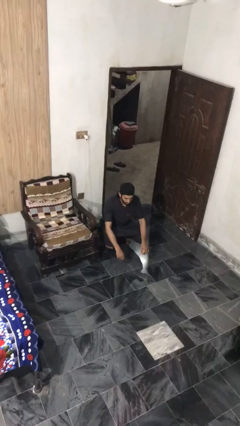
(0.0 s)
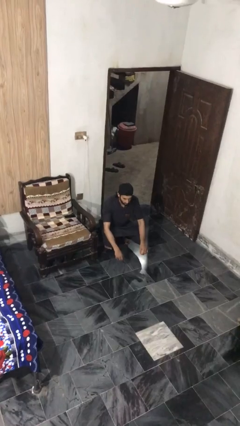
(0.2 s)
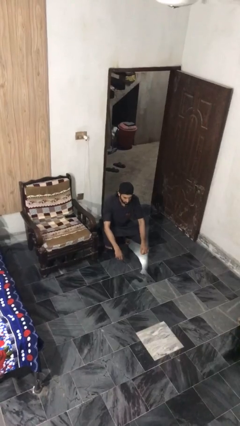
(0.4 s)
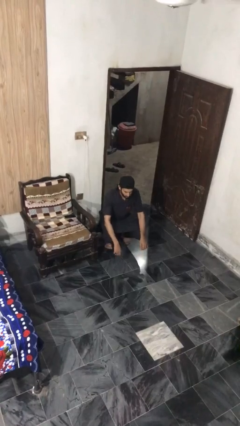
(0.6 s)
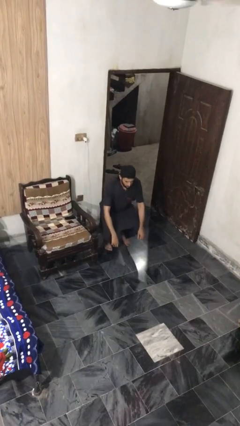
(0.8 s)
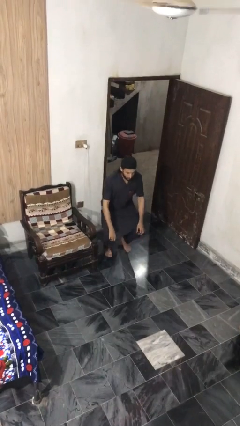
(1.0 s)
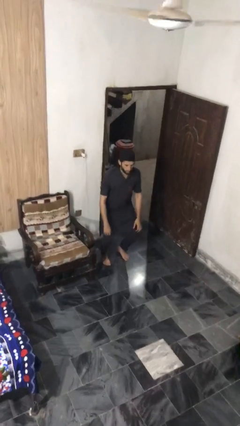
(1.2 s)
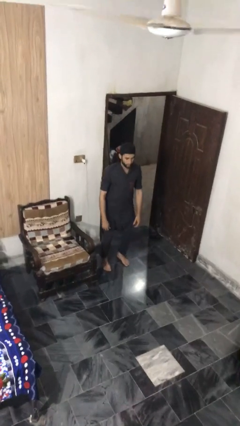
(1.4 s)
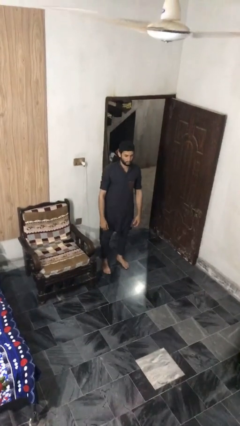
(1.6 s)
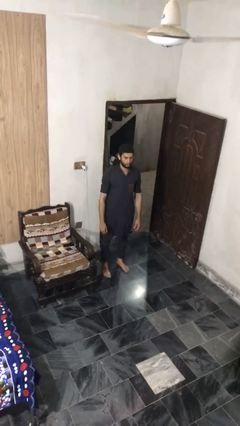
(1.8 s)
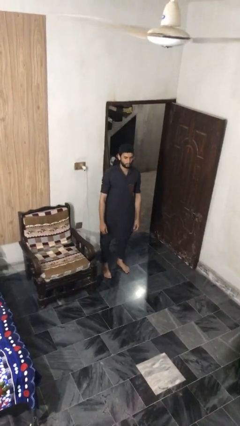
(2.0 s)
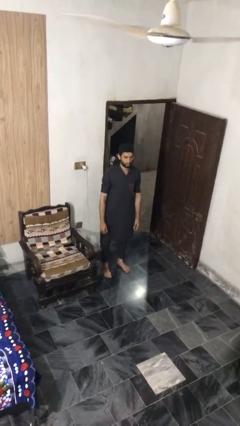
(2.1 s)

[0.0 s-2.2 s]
person stands up

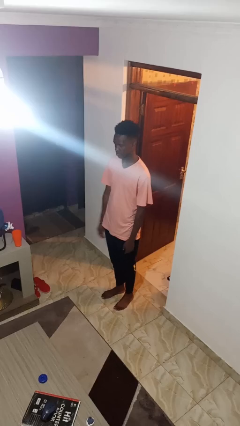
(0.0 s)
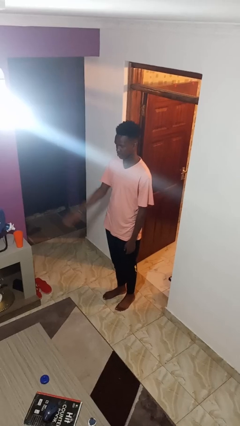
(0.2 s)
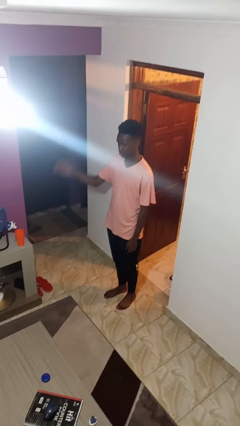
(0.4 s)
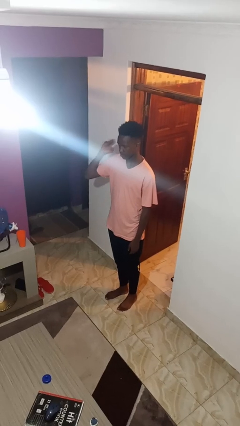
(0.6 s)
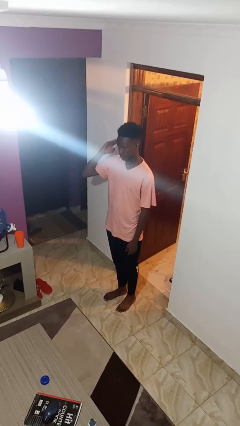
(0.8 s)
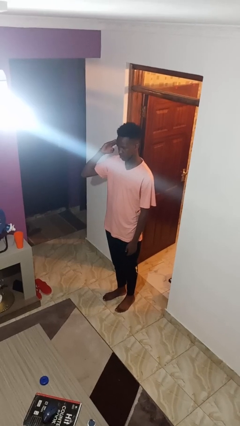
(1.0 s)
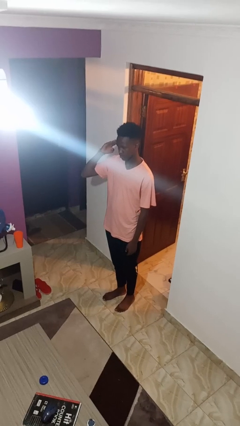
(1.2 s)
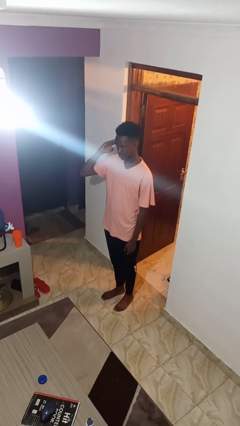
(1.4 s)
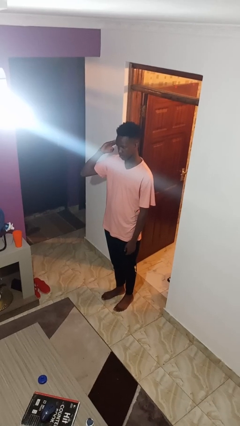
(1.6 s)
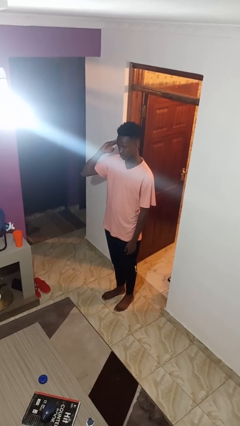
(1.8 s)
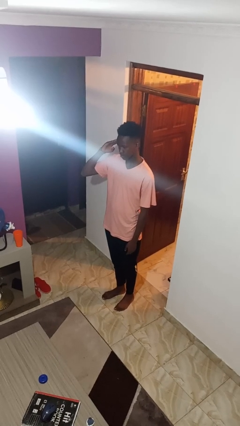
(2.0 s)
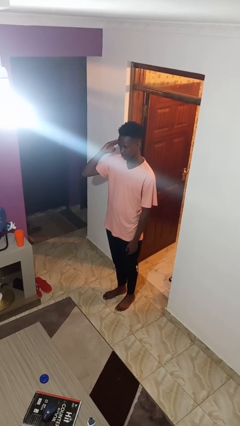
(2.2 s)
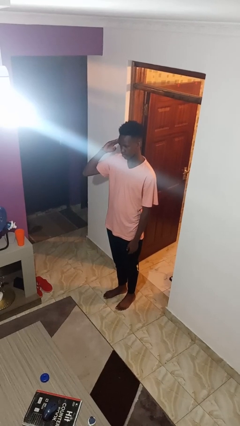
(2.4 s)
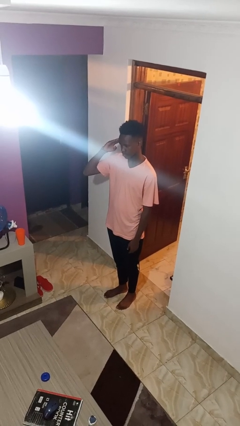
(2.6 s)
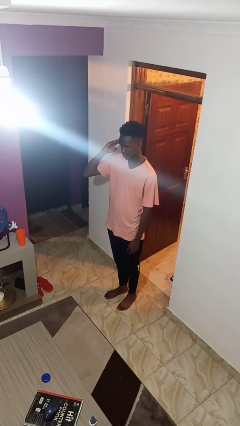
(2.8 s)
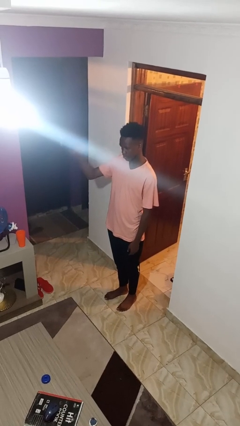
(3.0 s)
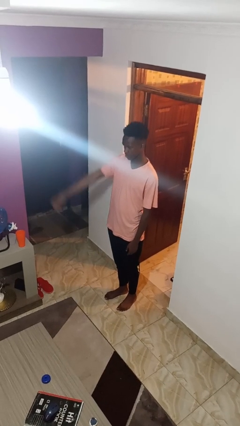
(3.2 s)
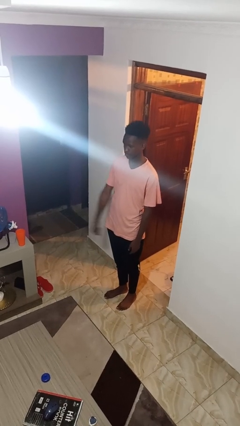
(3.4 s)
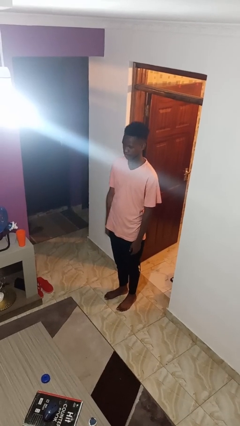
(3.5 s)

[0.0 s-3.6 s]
person salutes

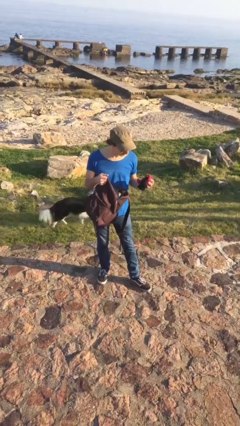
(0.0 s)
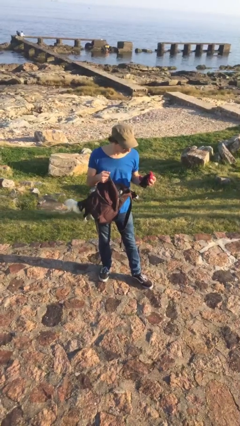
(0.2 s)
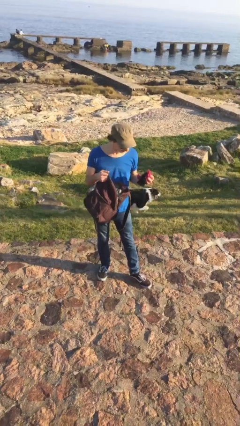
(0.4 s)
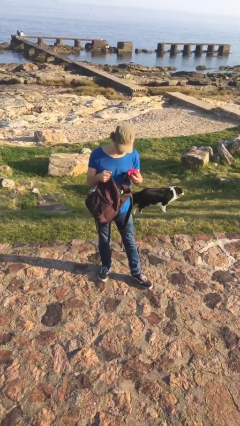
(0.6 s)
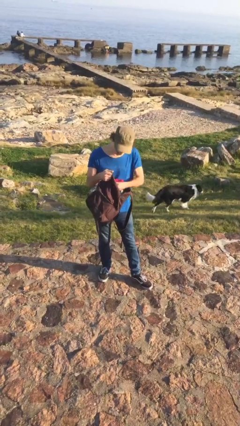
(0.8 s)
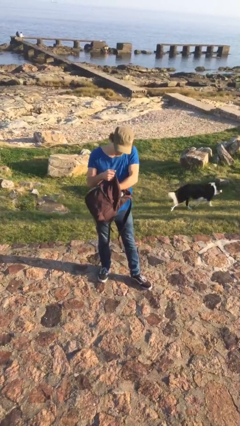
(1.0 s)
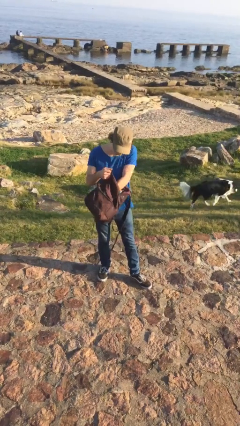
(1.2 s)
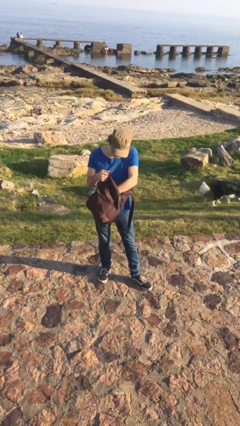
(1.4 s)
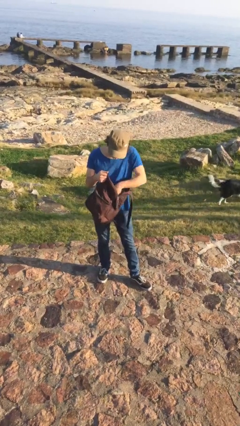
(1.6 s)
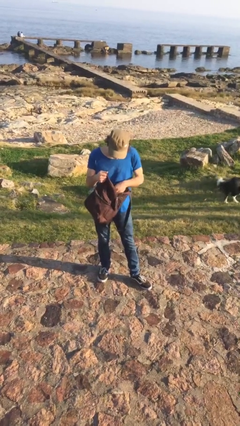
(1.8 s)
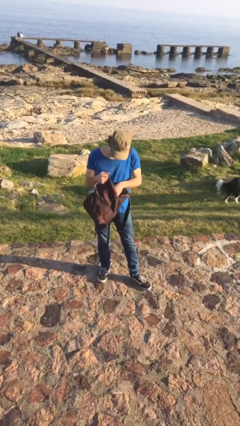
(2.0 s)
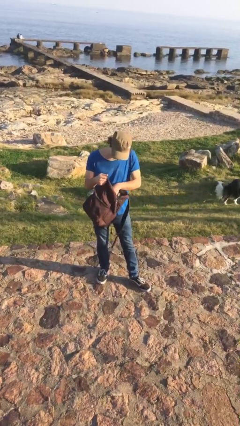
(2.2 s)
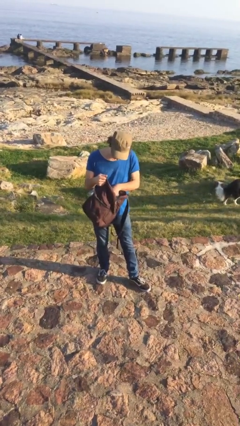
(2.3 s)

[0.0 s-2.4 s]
person puts object into backpack

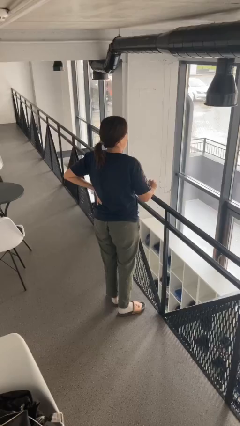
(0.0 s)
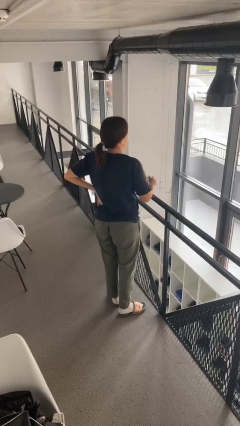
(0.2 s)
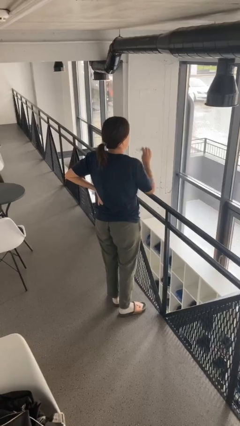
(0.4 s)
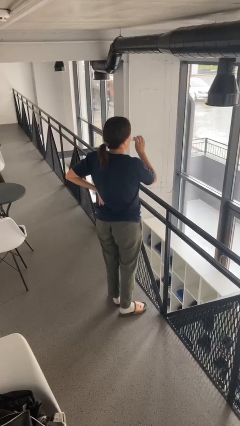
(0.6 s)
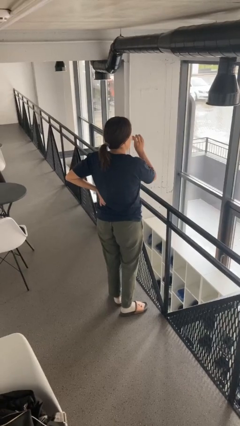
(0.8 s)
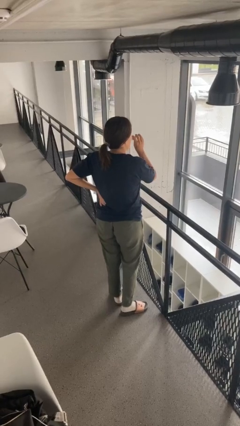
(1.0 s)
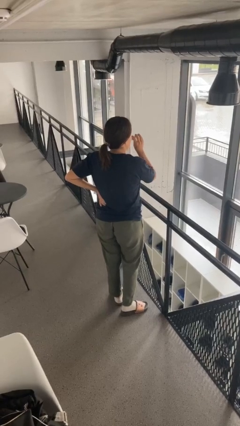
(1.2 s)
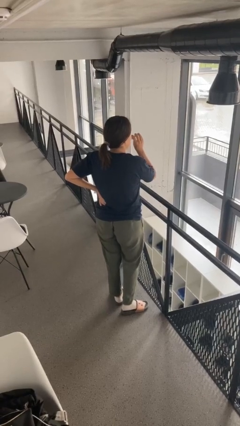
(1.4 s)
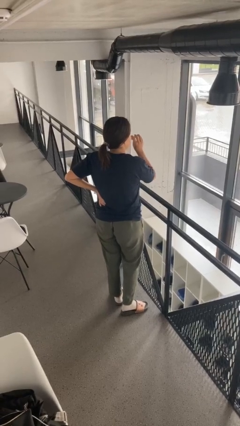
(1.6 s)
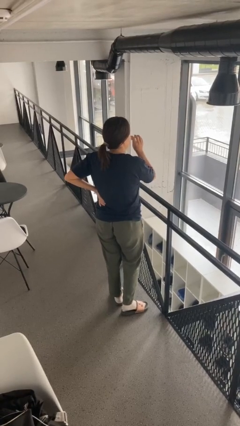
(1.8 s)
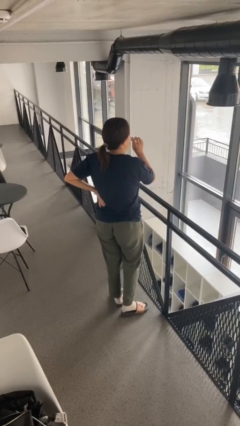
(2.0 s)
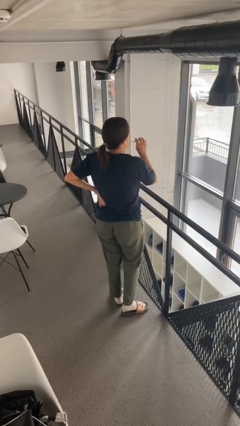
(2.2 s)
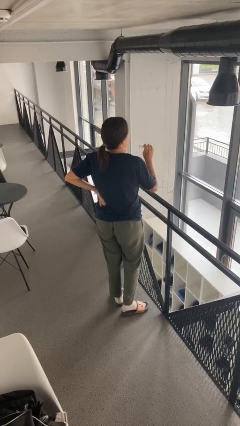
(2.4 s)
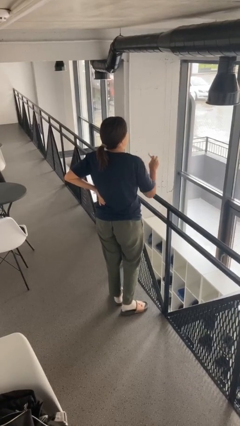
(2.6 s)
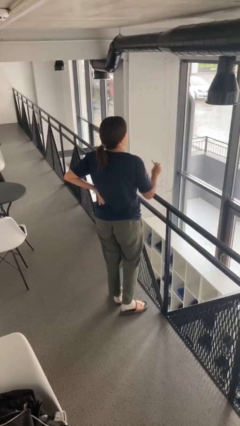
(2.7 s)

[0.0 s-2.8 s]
person vapes

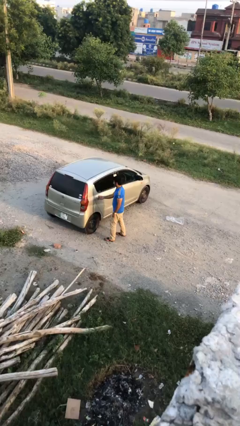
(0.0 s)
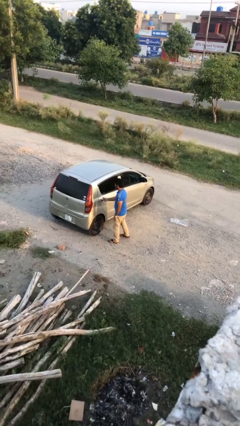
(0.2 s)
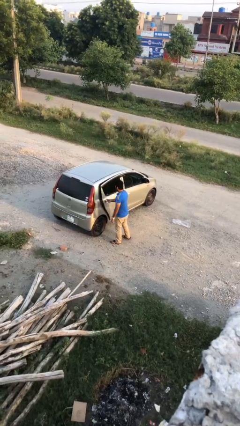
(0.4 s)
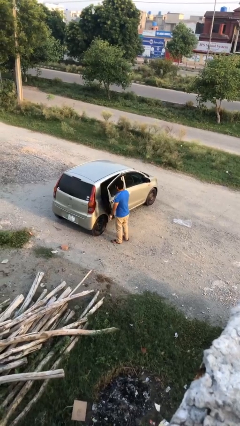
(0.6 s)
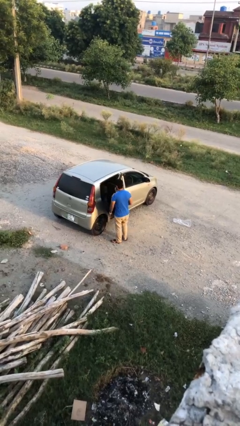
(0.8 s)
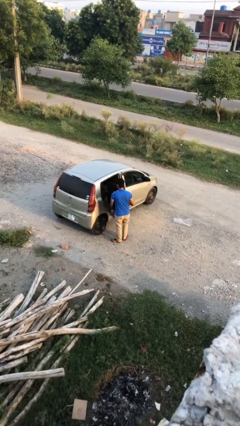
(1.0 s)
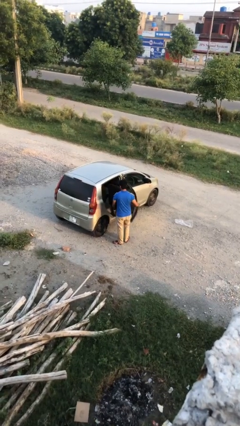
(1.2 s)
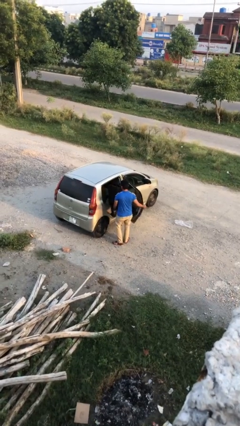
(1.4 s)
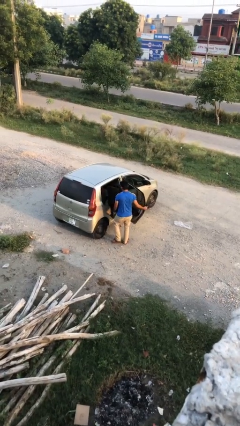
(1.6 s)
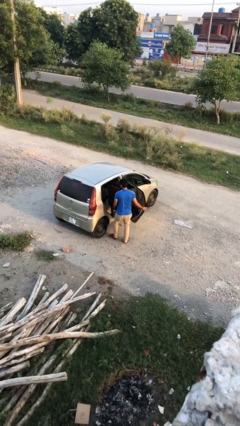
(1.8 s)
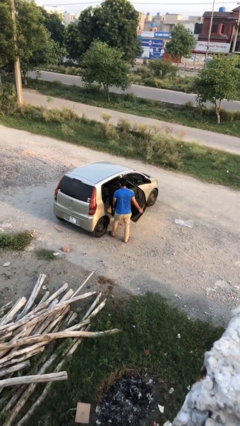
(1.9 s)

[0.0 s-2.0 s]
person opens car door

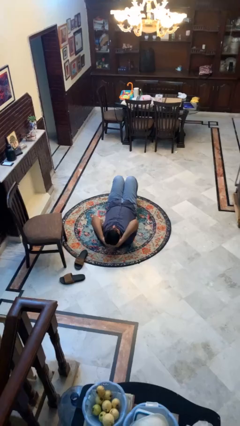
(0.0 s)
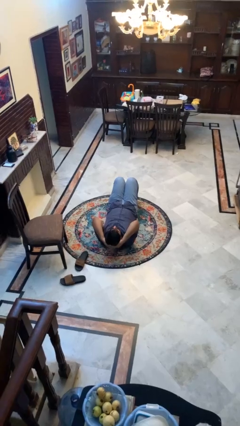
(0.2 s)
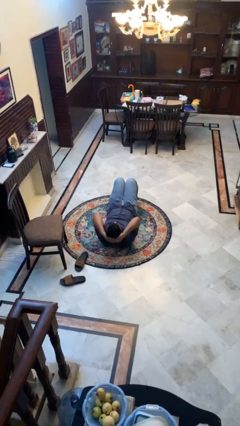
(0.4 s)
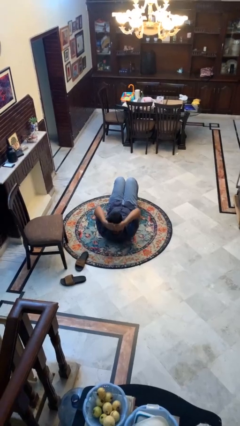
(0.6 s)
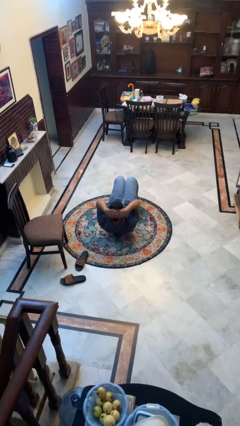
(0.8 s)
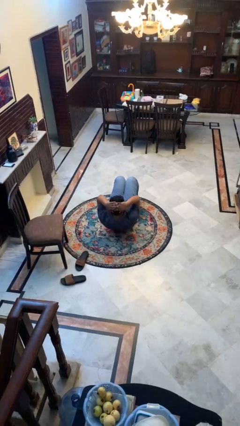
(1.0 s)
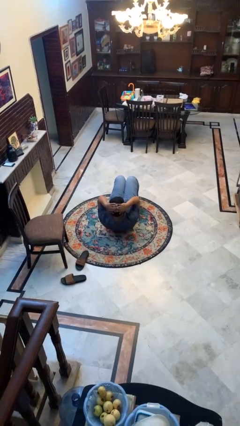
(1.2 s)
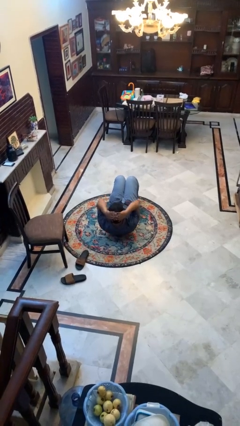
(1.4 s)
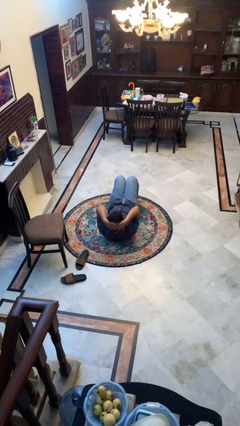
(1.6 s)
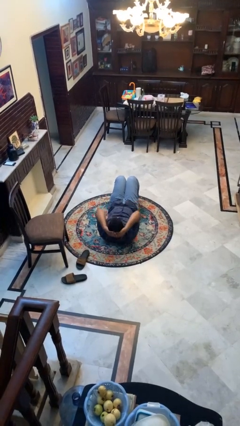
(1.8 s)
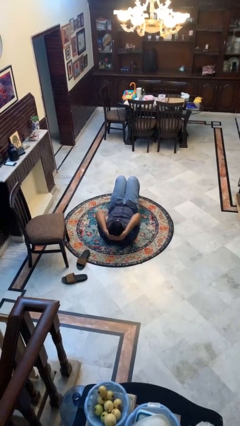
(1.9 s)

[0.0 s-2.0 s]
person exercises with situp

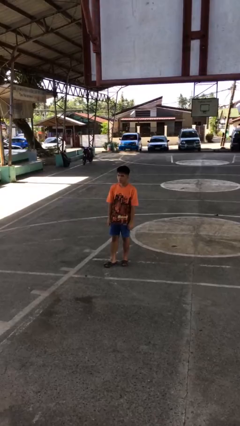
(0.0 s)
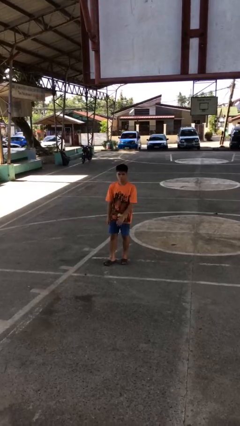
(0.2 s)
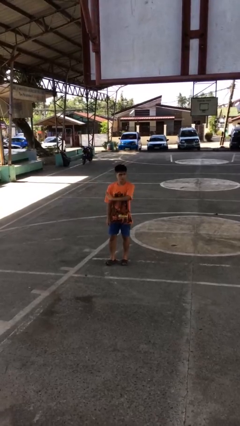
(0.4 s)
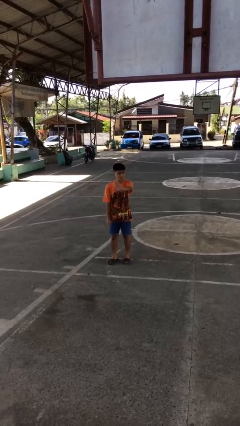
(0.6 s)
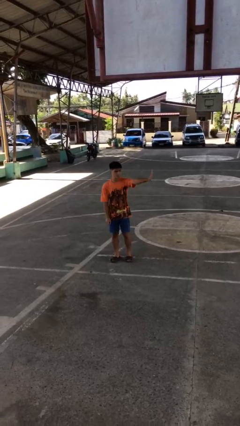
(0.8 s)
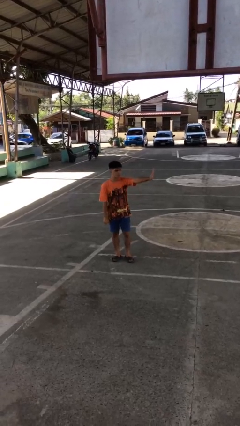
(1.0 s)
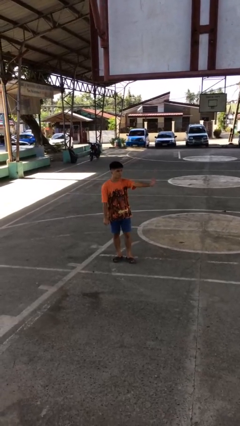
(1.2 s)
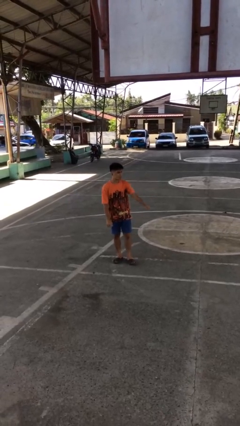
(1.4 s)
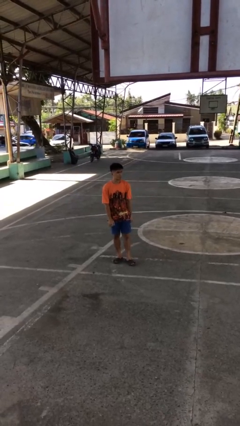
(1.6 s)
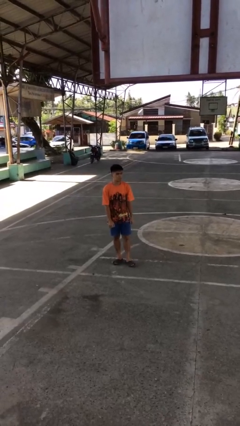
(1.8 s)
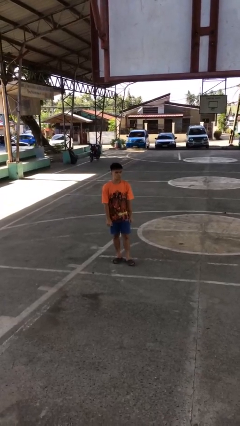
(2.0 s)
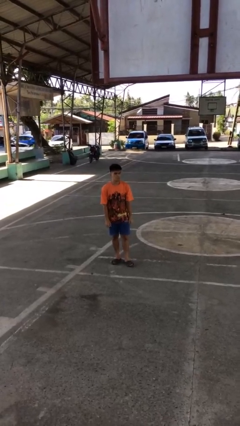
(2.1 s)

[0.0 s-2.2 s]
person gestures swipe left
